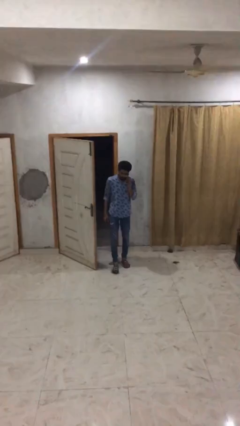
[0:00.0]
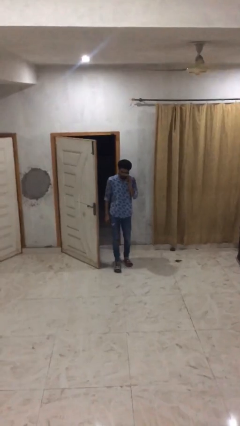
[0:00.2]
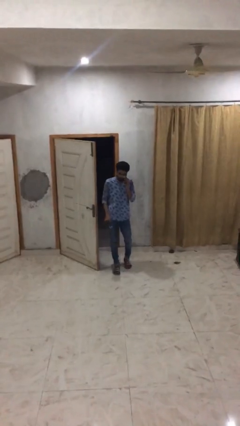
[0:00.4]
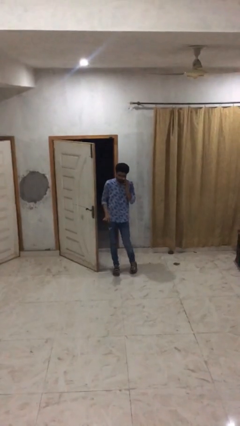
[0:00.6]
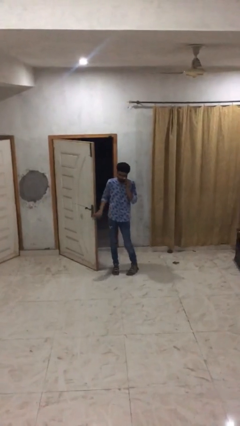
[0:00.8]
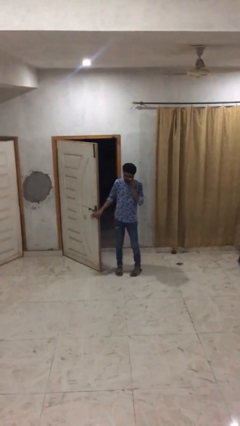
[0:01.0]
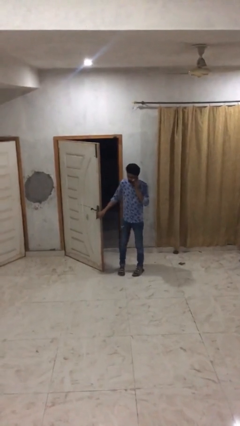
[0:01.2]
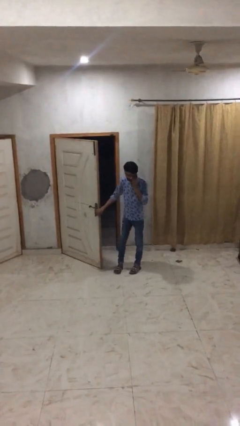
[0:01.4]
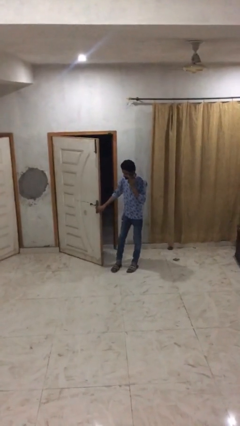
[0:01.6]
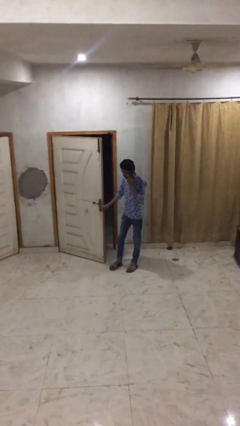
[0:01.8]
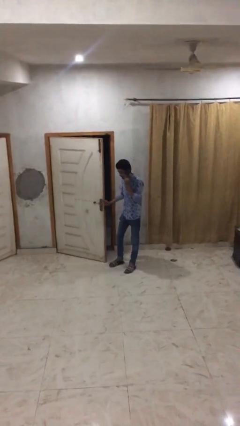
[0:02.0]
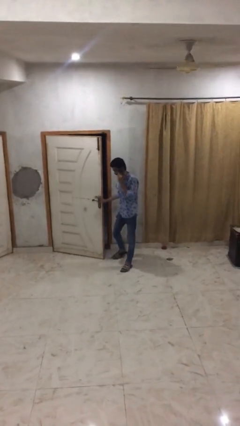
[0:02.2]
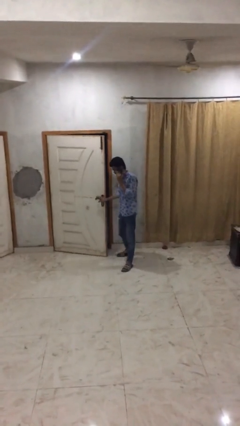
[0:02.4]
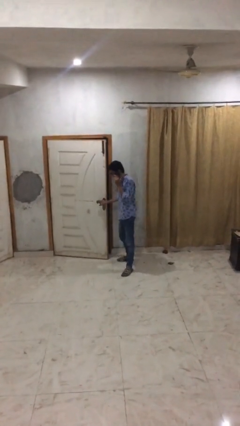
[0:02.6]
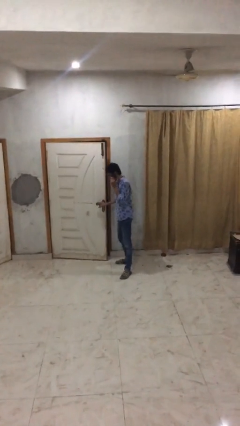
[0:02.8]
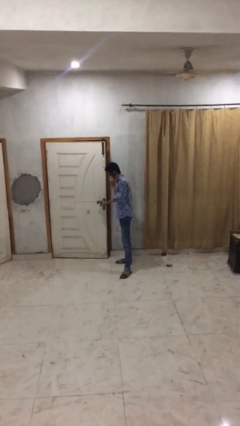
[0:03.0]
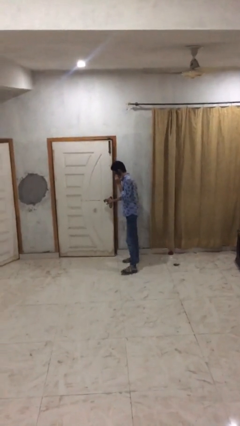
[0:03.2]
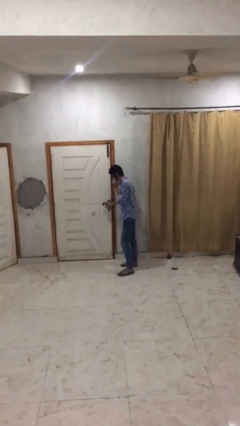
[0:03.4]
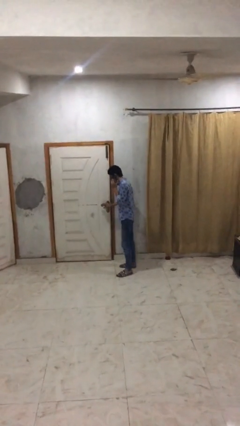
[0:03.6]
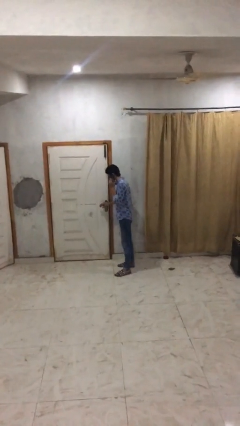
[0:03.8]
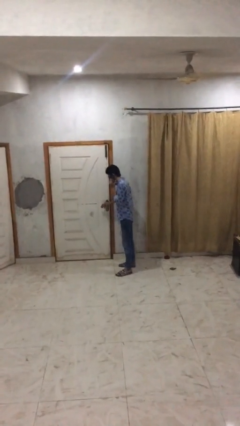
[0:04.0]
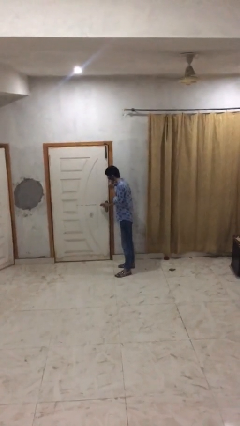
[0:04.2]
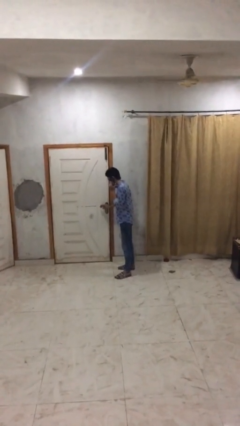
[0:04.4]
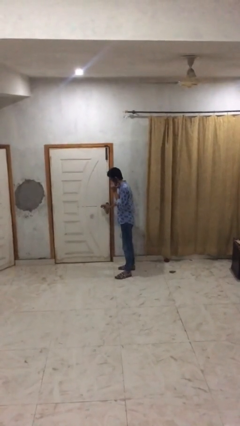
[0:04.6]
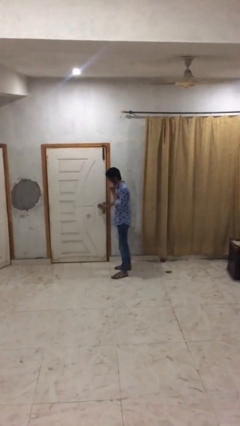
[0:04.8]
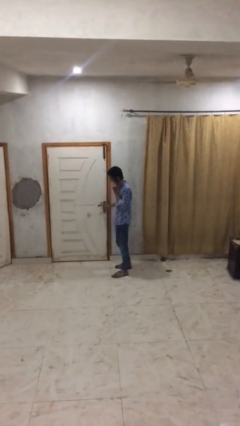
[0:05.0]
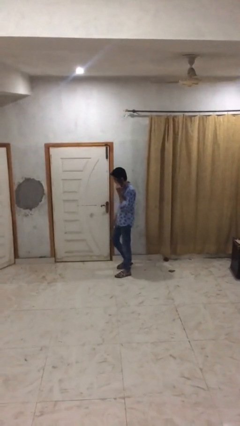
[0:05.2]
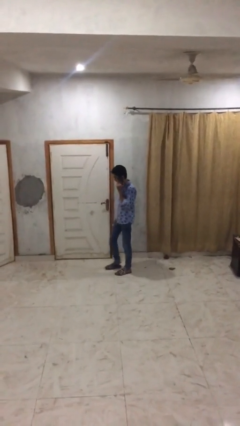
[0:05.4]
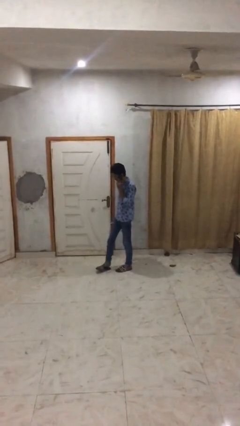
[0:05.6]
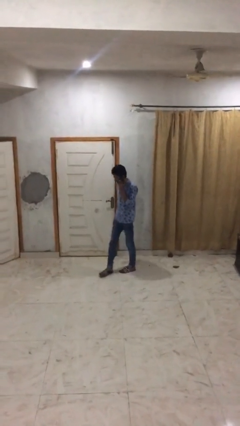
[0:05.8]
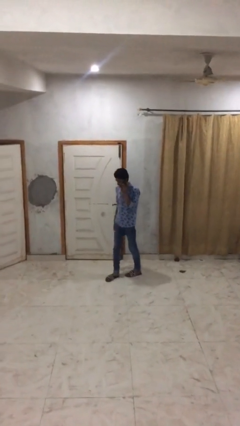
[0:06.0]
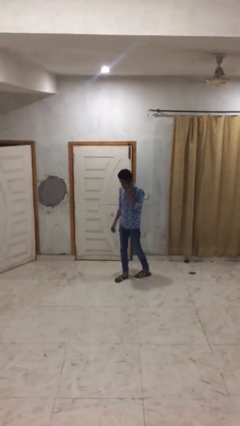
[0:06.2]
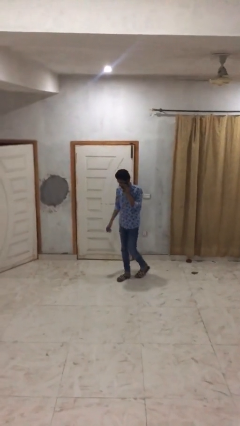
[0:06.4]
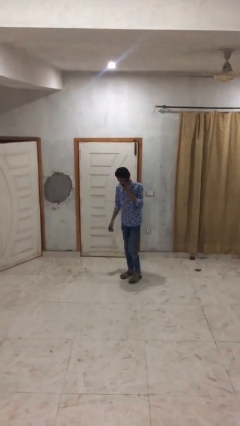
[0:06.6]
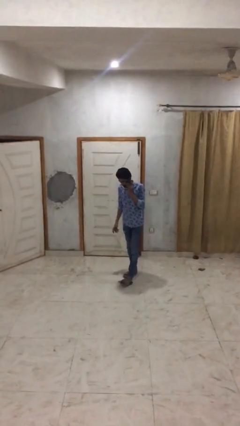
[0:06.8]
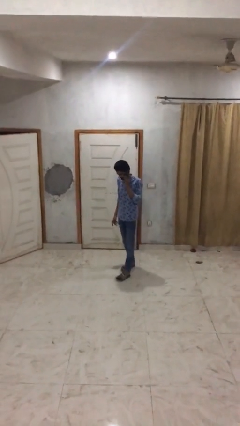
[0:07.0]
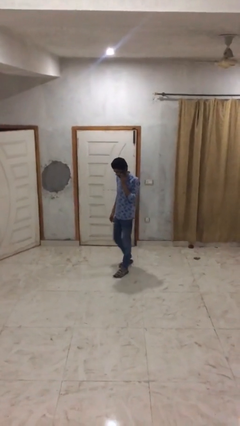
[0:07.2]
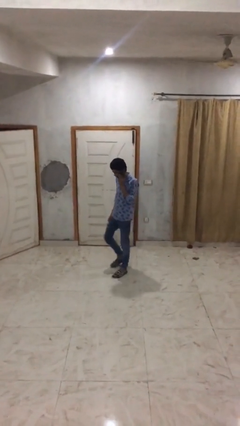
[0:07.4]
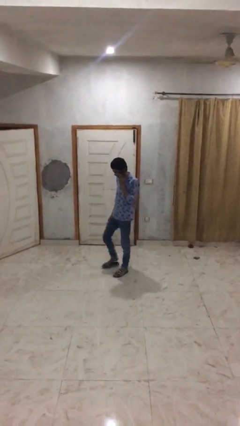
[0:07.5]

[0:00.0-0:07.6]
person closes facility door

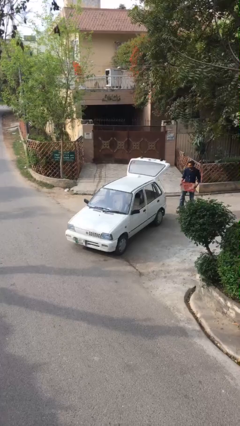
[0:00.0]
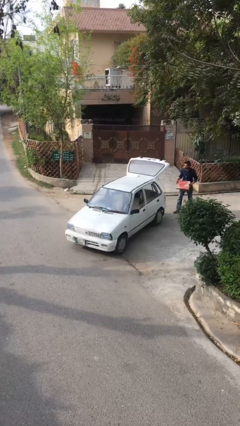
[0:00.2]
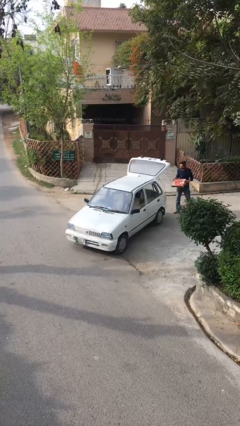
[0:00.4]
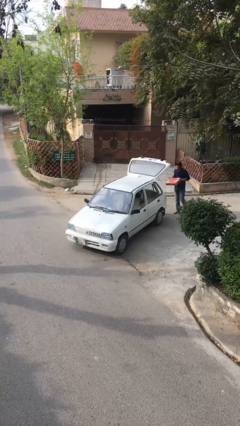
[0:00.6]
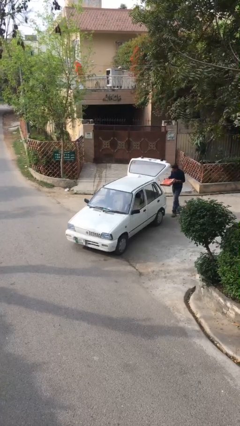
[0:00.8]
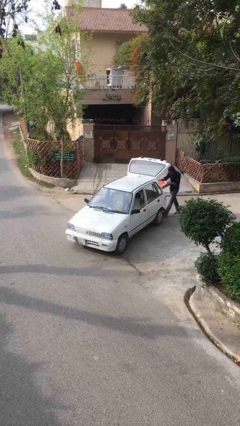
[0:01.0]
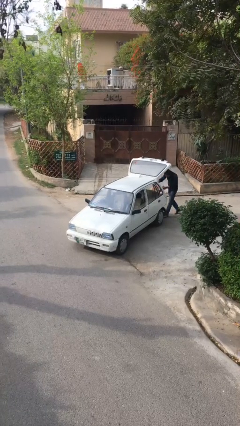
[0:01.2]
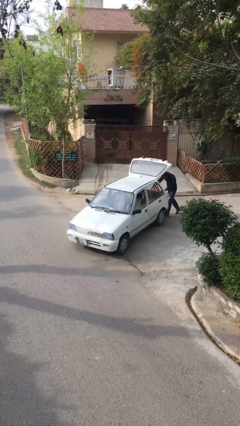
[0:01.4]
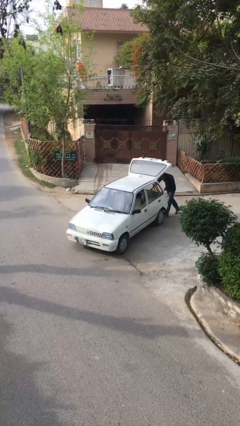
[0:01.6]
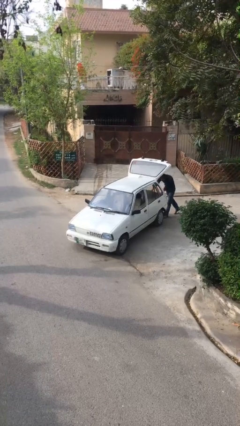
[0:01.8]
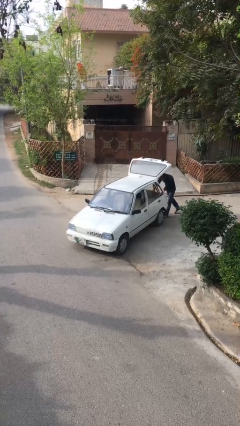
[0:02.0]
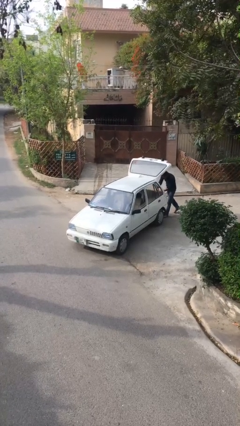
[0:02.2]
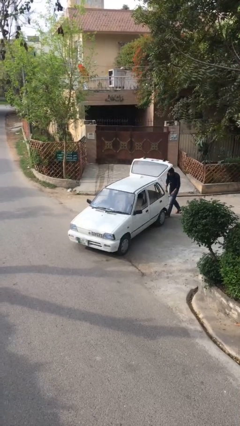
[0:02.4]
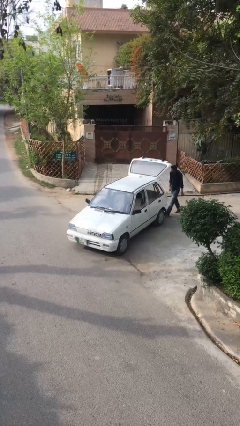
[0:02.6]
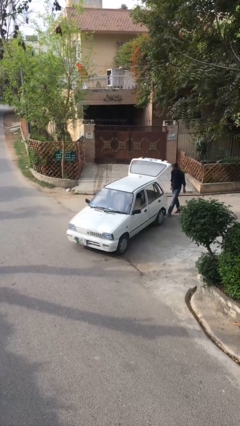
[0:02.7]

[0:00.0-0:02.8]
person loads car

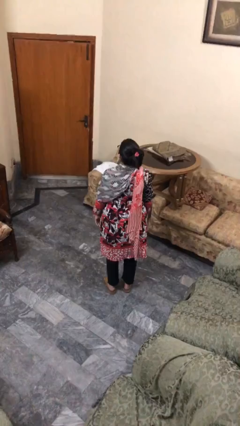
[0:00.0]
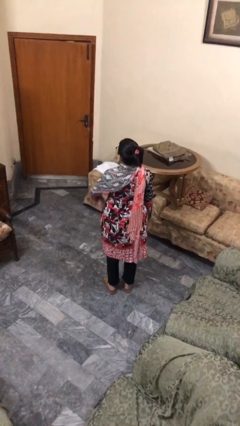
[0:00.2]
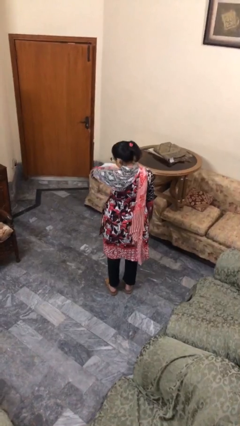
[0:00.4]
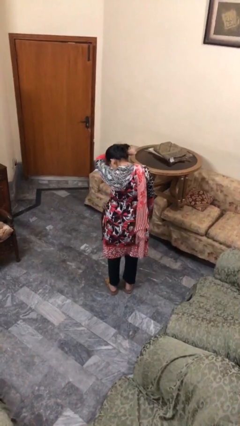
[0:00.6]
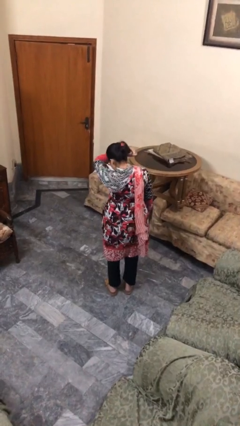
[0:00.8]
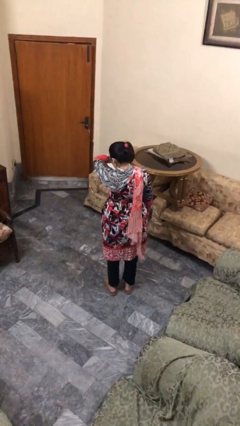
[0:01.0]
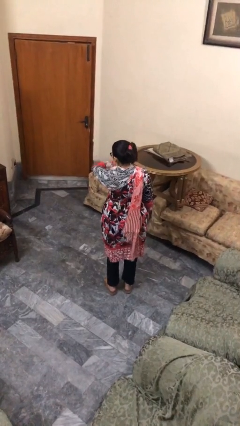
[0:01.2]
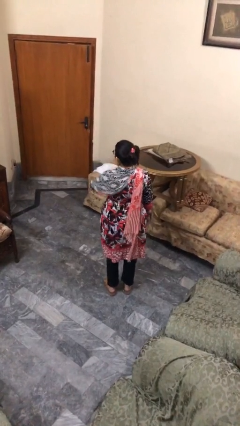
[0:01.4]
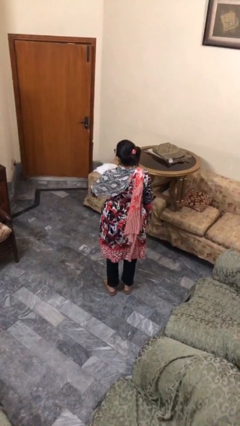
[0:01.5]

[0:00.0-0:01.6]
person sneezes into arm

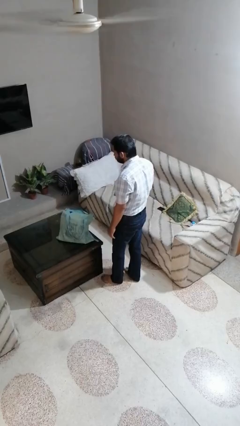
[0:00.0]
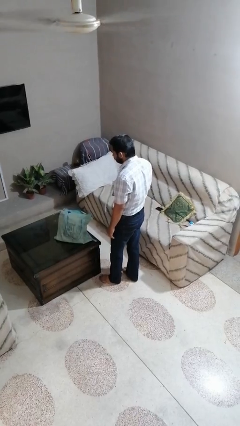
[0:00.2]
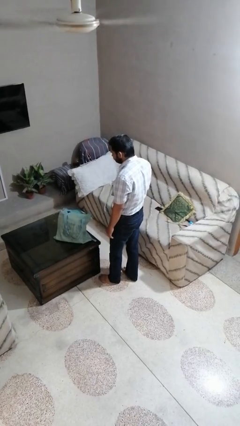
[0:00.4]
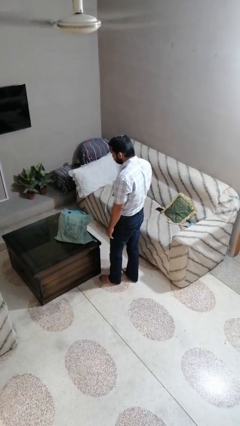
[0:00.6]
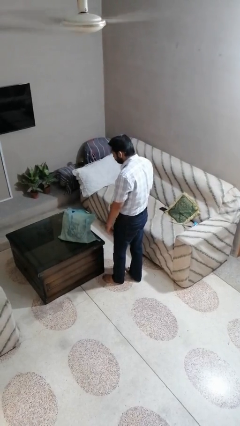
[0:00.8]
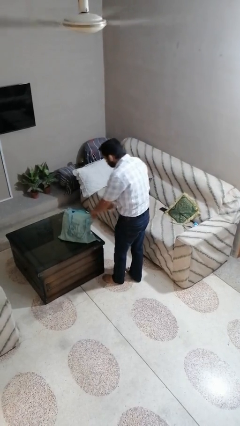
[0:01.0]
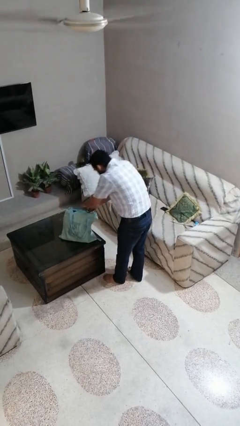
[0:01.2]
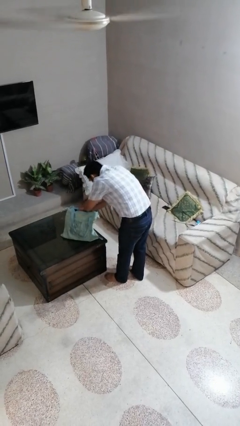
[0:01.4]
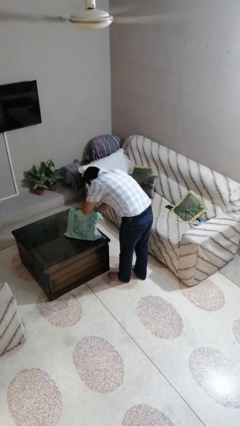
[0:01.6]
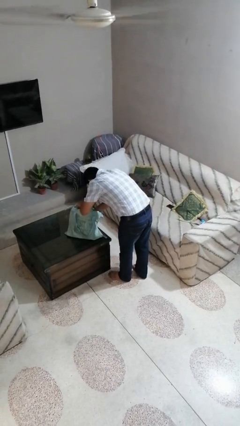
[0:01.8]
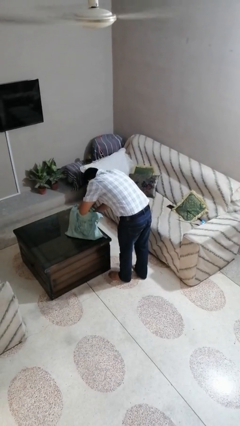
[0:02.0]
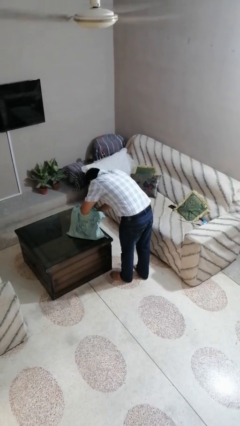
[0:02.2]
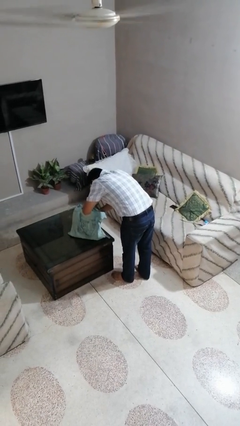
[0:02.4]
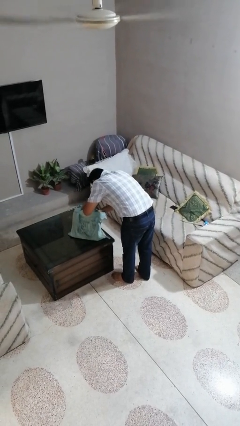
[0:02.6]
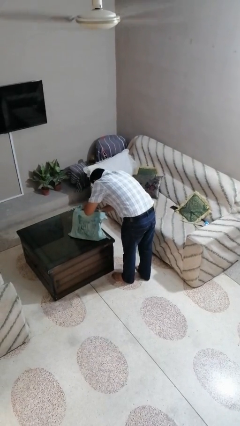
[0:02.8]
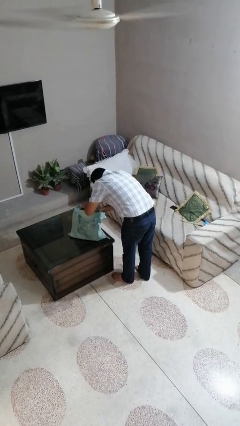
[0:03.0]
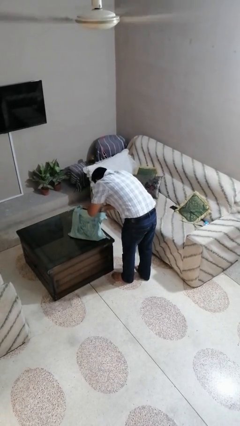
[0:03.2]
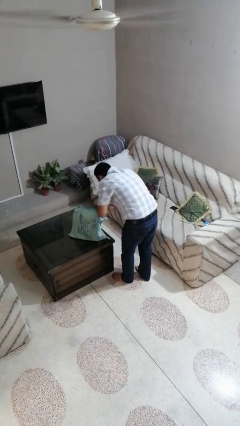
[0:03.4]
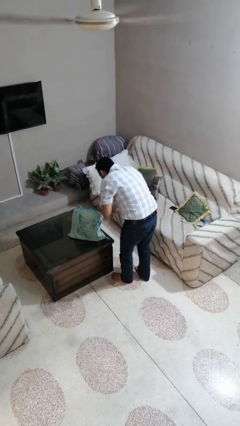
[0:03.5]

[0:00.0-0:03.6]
person searches in bag

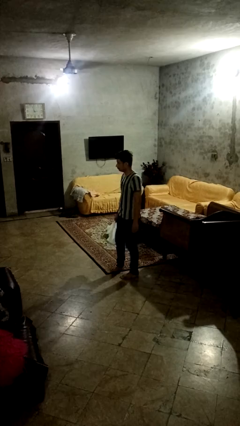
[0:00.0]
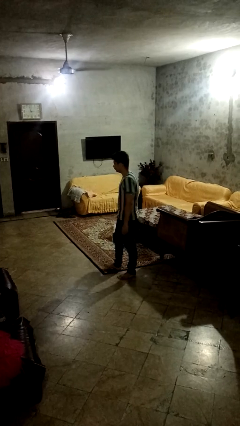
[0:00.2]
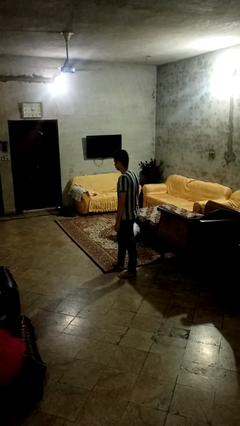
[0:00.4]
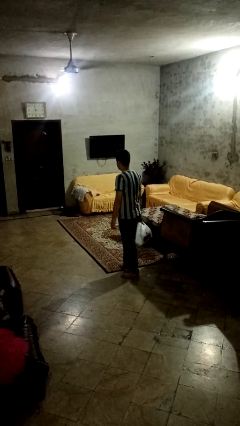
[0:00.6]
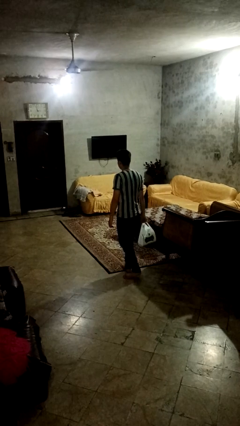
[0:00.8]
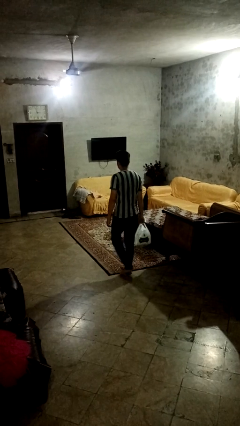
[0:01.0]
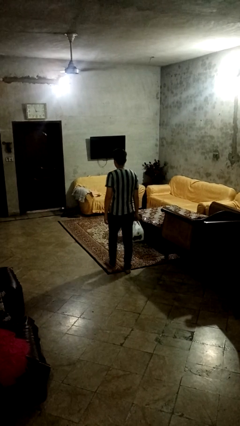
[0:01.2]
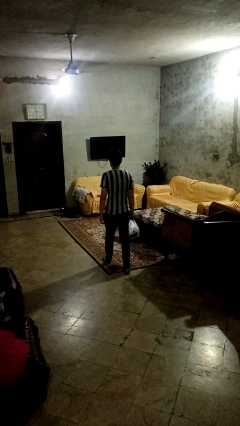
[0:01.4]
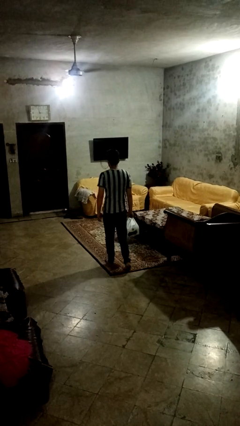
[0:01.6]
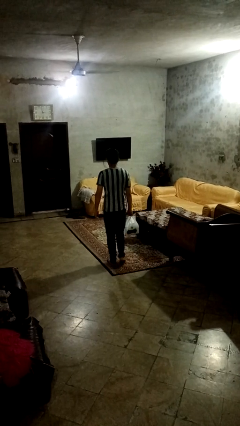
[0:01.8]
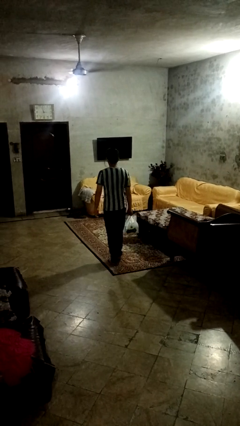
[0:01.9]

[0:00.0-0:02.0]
person carries groceries
